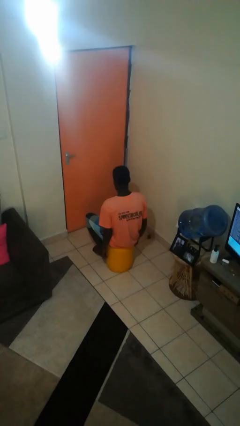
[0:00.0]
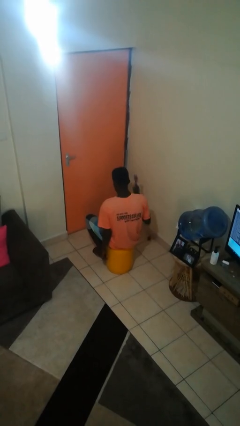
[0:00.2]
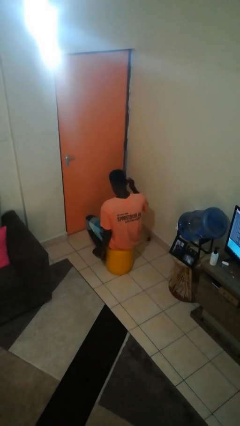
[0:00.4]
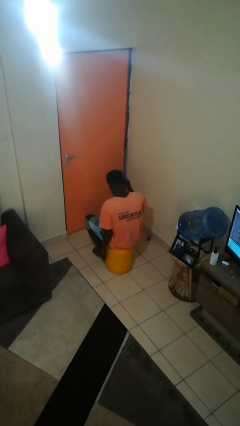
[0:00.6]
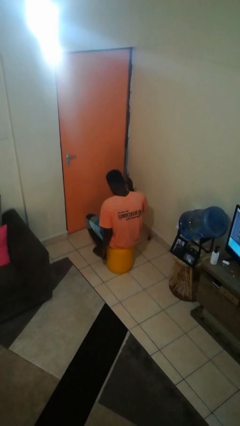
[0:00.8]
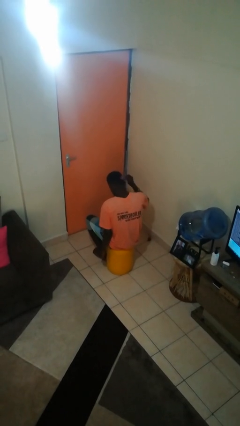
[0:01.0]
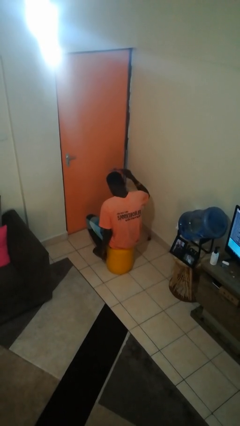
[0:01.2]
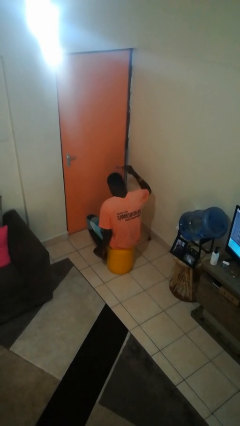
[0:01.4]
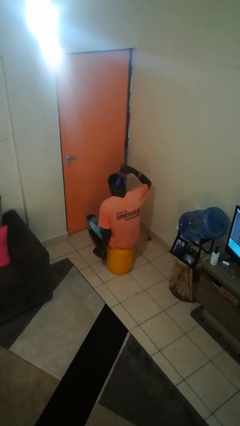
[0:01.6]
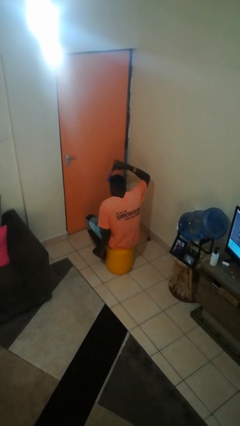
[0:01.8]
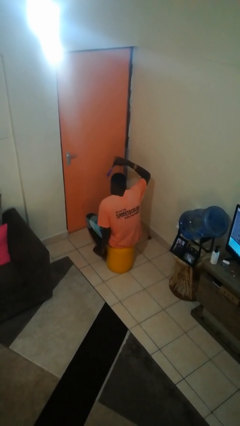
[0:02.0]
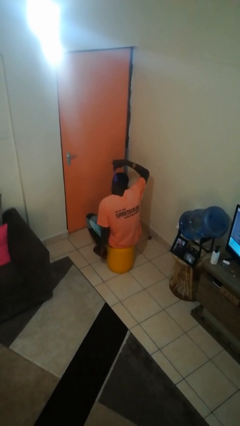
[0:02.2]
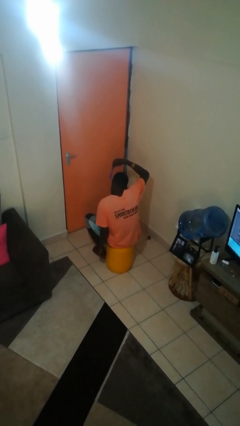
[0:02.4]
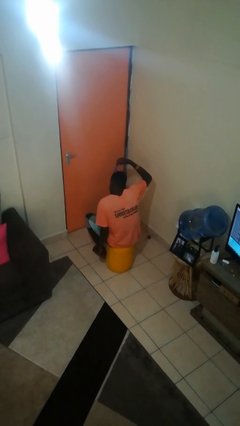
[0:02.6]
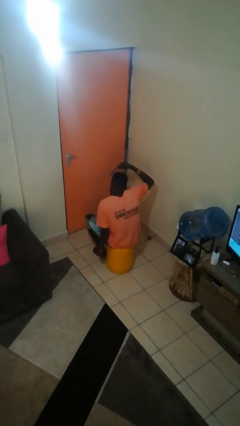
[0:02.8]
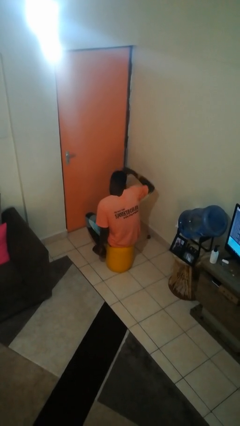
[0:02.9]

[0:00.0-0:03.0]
person brushes hair

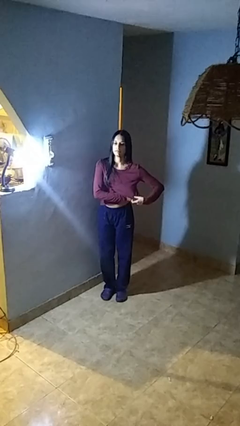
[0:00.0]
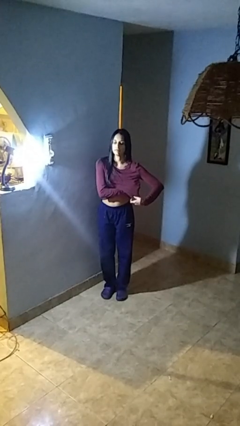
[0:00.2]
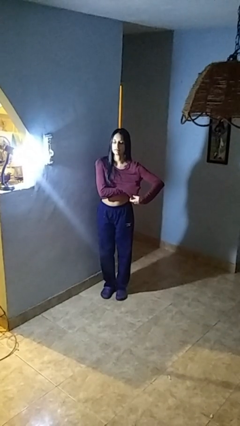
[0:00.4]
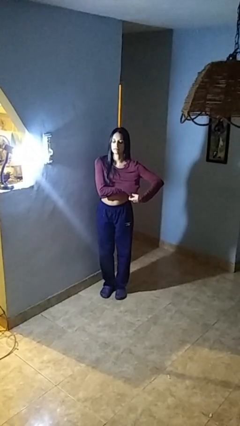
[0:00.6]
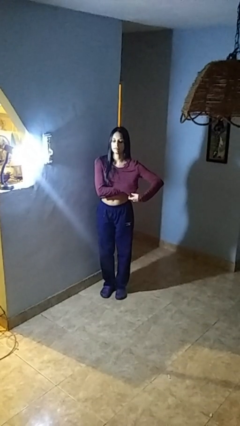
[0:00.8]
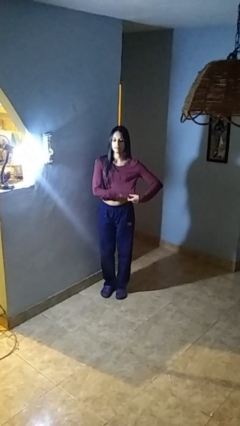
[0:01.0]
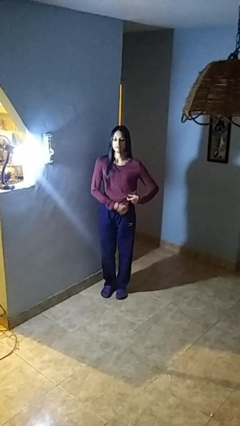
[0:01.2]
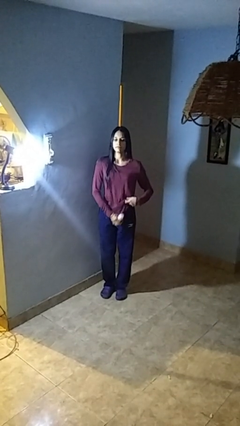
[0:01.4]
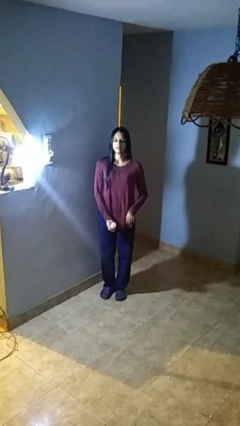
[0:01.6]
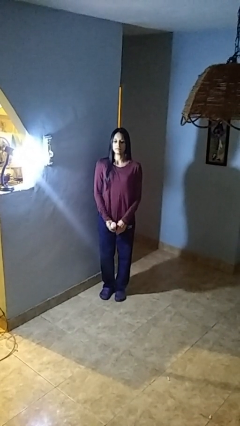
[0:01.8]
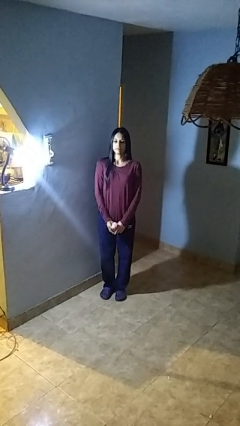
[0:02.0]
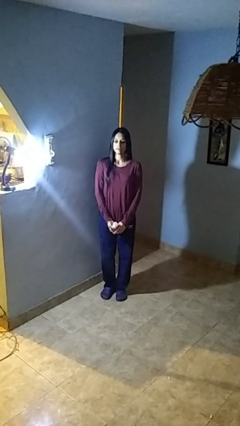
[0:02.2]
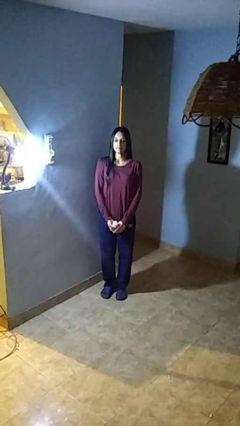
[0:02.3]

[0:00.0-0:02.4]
person applies deodorant

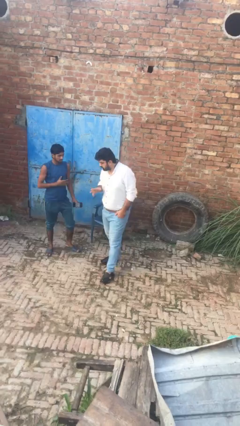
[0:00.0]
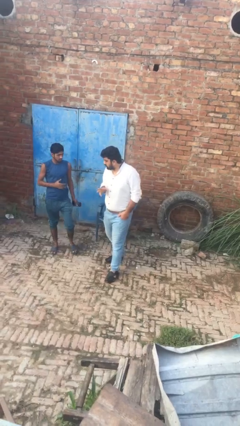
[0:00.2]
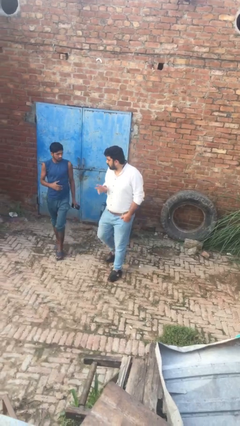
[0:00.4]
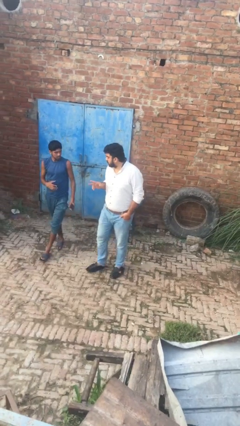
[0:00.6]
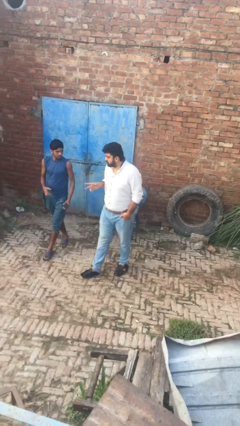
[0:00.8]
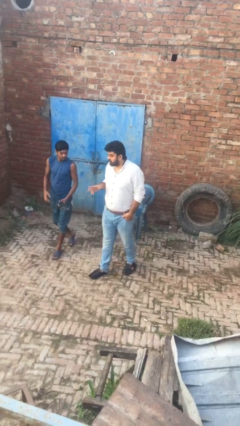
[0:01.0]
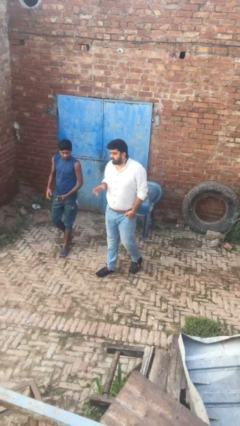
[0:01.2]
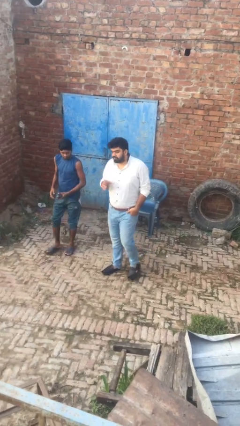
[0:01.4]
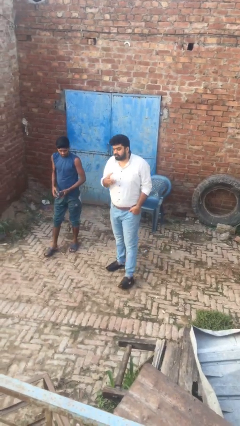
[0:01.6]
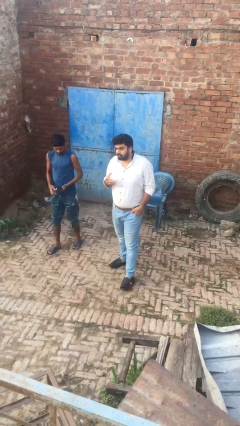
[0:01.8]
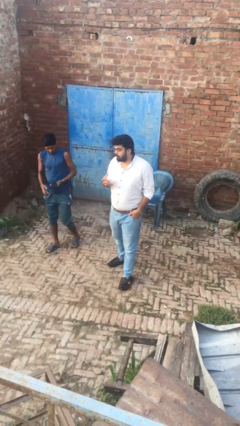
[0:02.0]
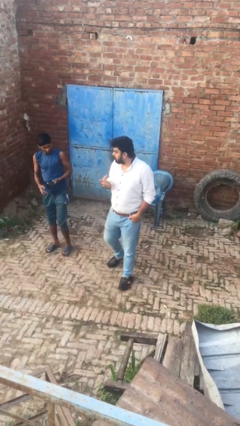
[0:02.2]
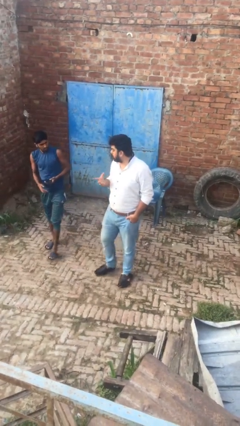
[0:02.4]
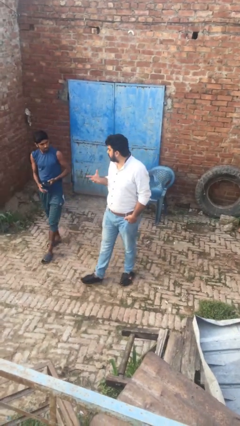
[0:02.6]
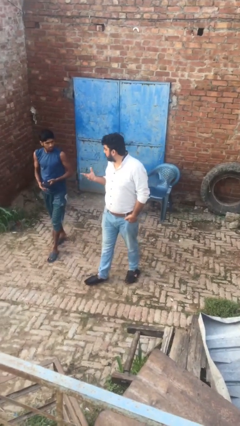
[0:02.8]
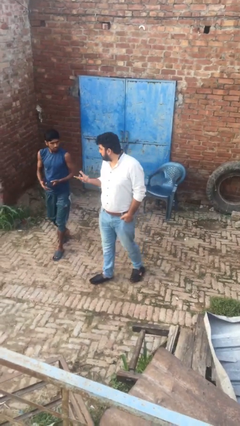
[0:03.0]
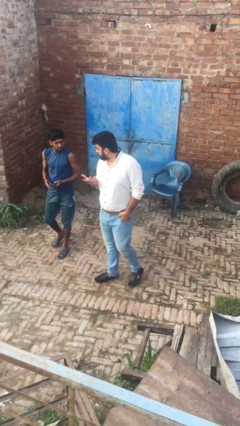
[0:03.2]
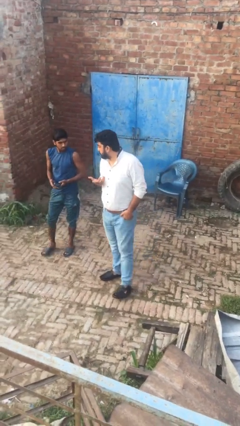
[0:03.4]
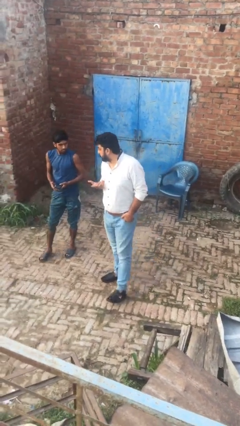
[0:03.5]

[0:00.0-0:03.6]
person talks to person

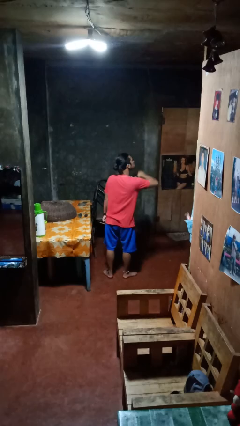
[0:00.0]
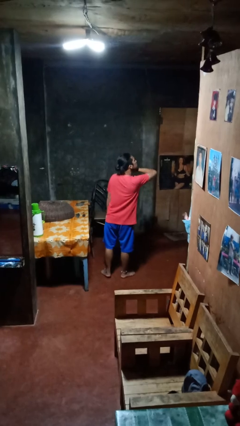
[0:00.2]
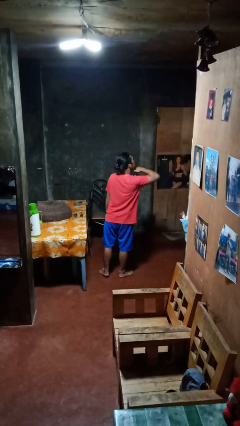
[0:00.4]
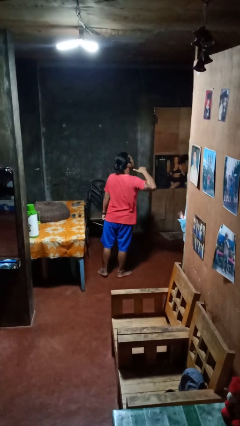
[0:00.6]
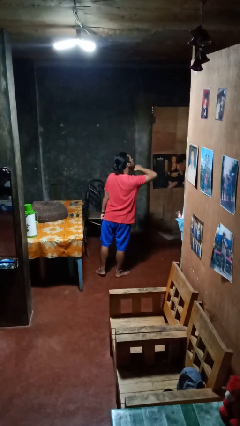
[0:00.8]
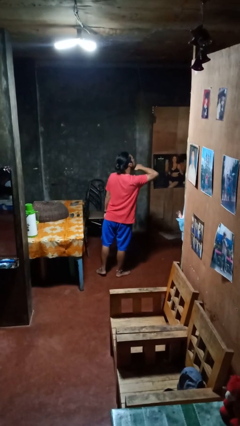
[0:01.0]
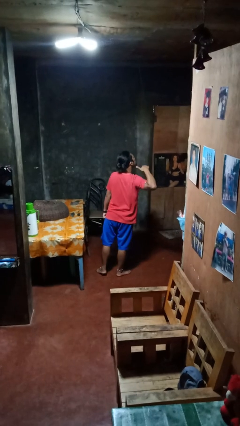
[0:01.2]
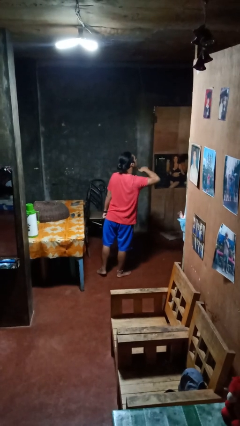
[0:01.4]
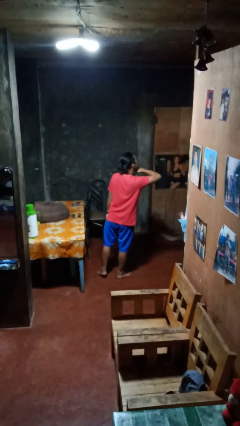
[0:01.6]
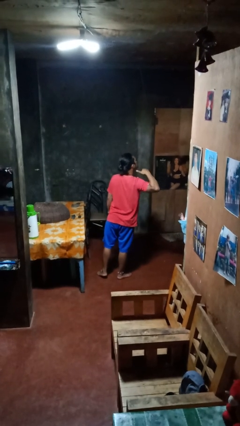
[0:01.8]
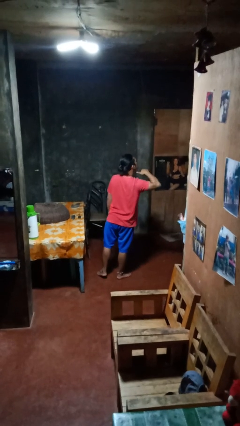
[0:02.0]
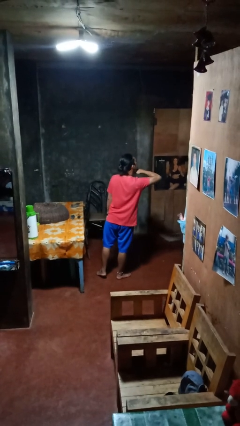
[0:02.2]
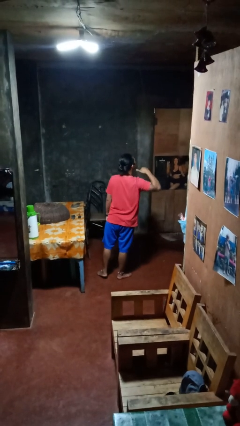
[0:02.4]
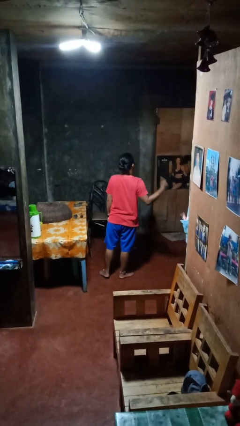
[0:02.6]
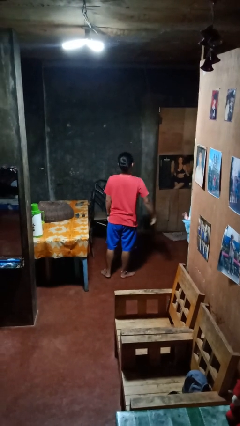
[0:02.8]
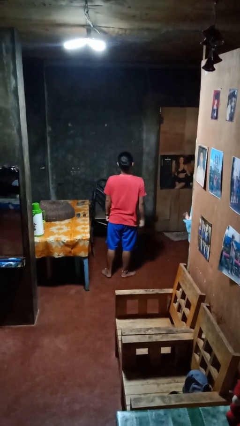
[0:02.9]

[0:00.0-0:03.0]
person gestures cut

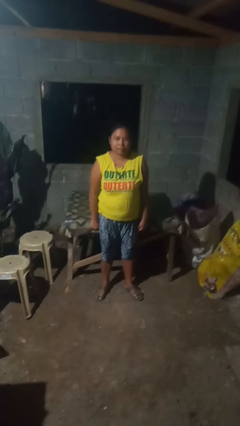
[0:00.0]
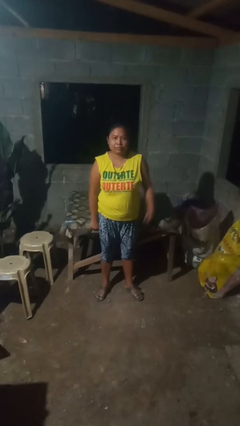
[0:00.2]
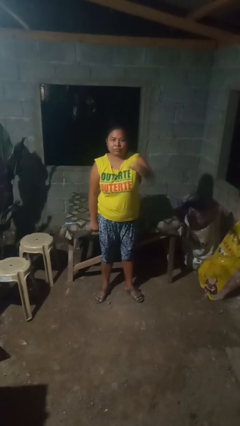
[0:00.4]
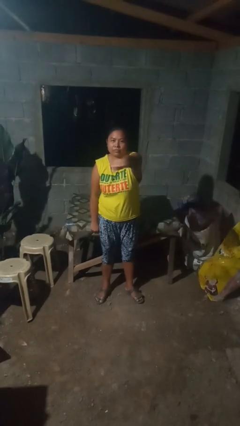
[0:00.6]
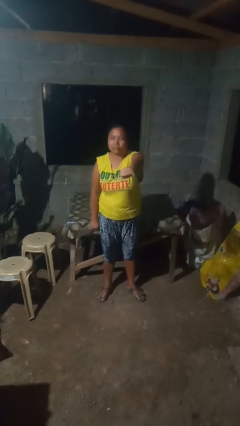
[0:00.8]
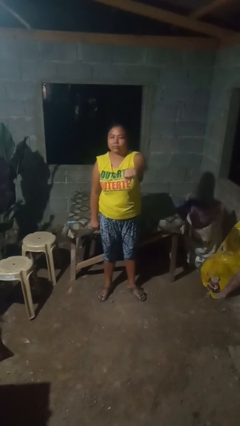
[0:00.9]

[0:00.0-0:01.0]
person punches

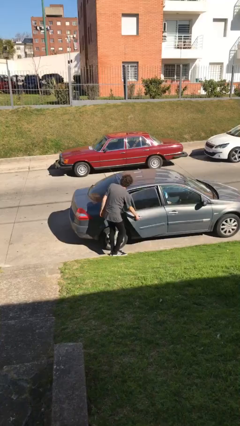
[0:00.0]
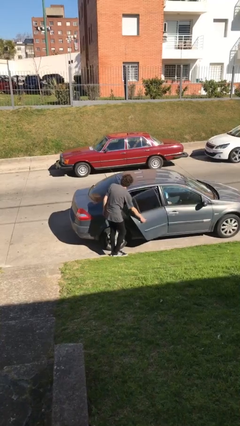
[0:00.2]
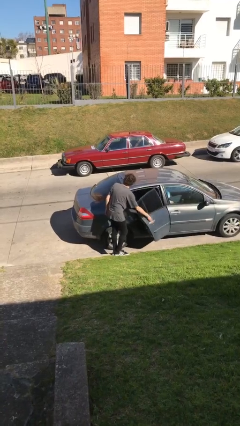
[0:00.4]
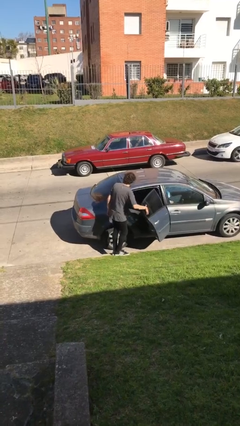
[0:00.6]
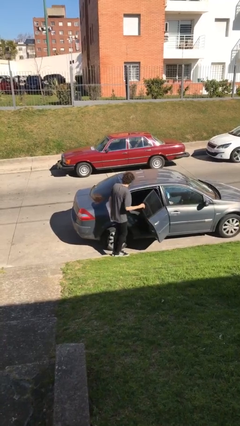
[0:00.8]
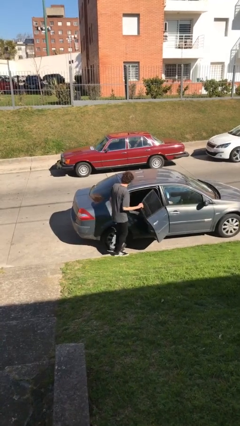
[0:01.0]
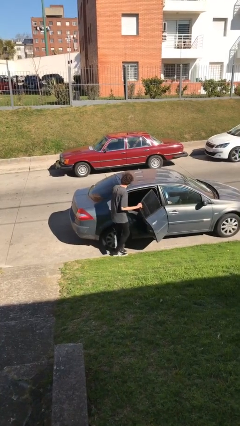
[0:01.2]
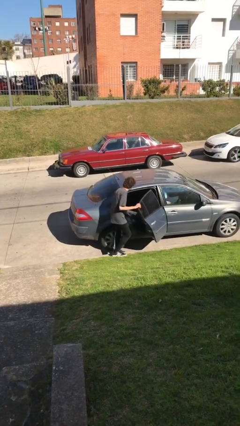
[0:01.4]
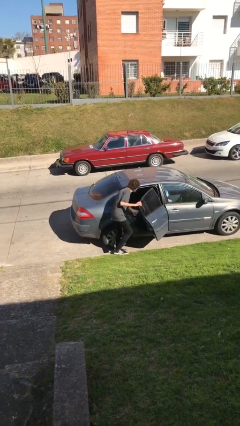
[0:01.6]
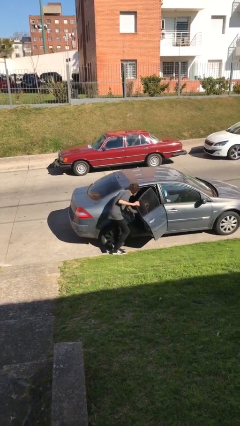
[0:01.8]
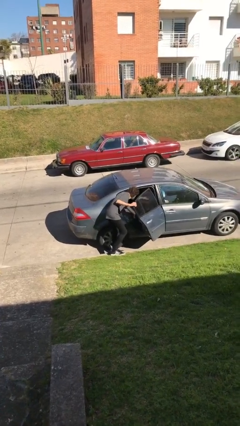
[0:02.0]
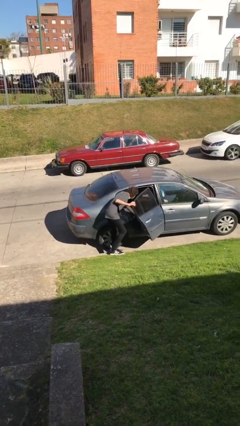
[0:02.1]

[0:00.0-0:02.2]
person opens car door

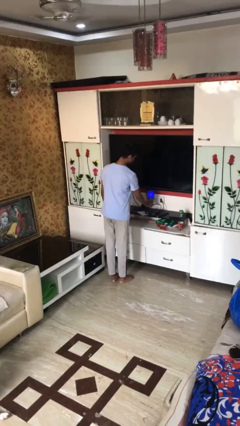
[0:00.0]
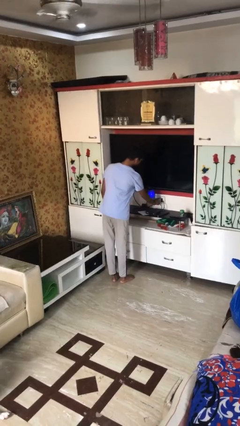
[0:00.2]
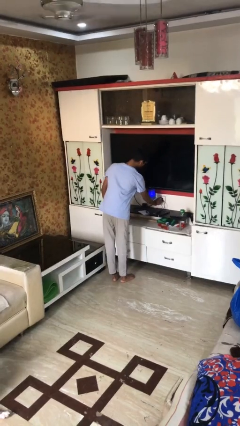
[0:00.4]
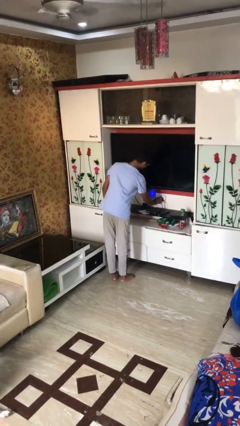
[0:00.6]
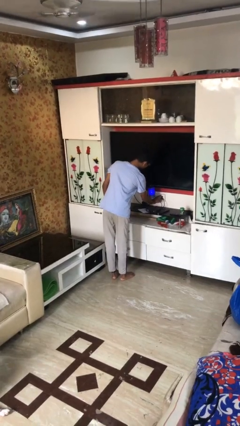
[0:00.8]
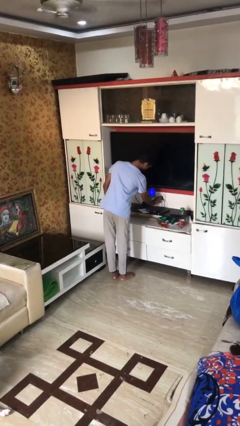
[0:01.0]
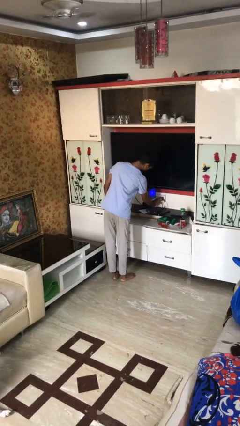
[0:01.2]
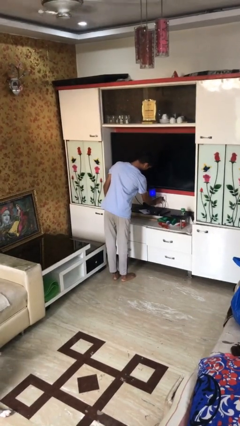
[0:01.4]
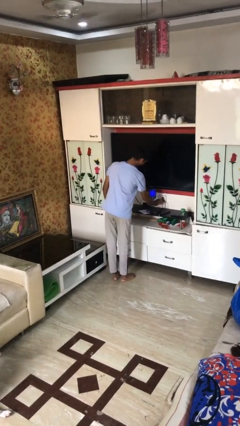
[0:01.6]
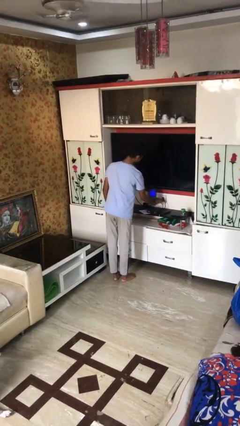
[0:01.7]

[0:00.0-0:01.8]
person turns off lamp

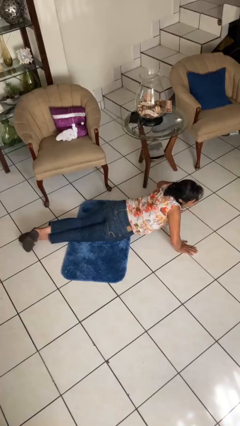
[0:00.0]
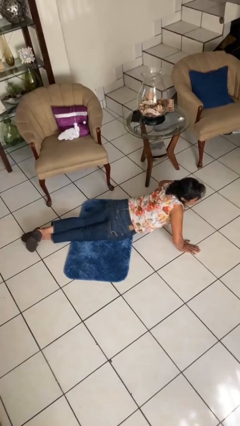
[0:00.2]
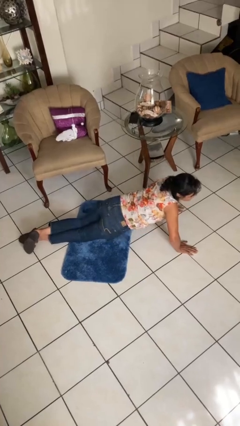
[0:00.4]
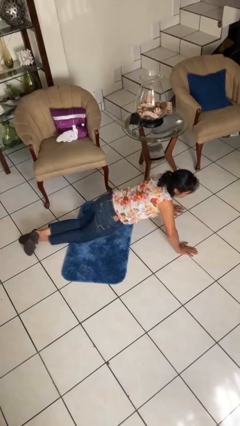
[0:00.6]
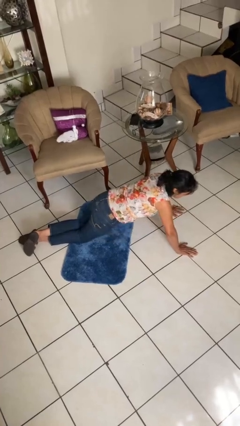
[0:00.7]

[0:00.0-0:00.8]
person exercises with pushup
